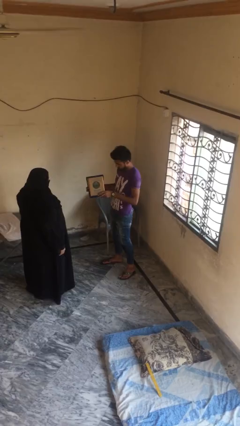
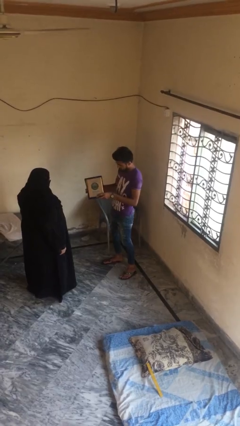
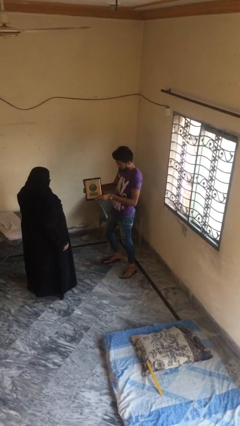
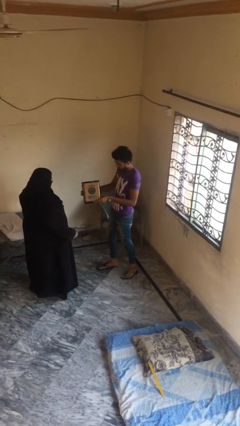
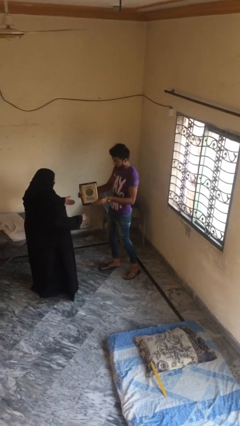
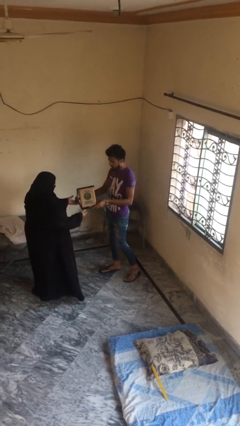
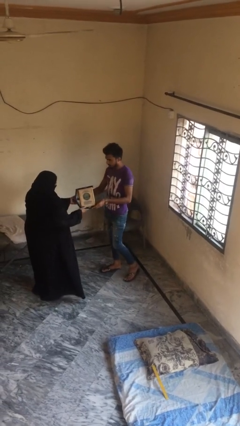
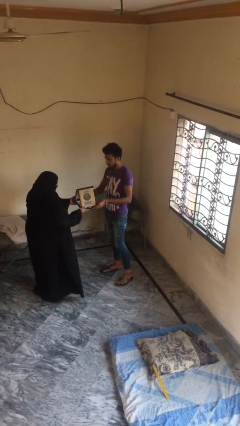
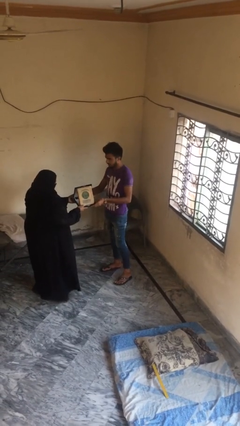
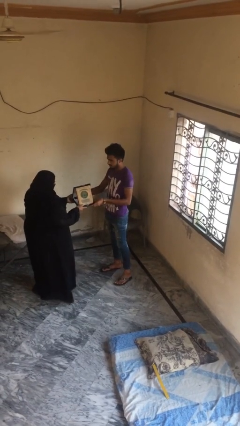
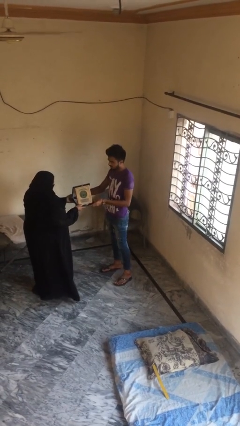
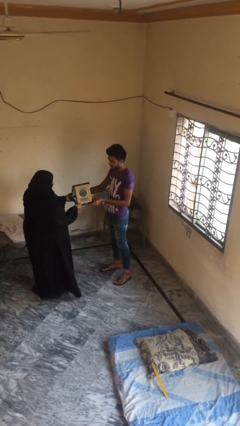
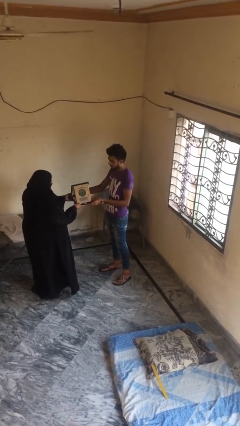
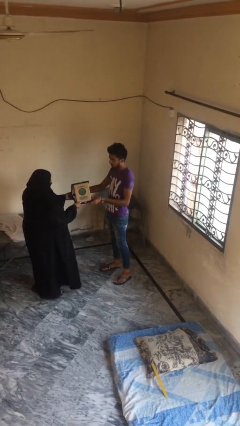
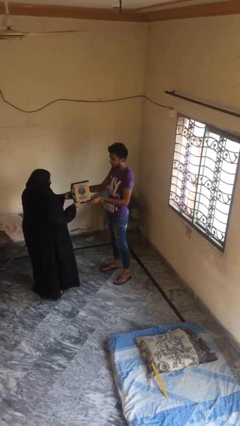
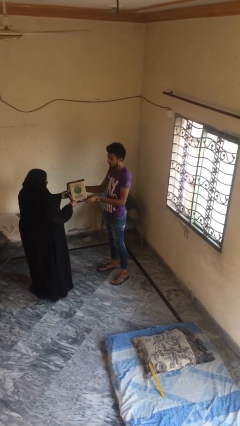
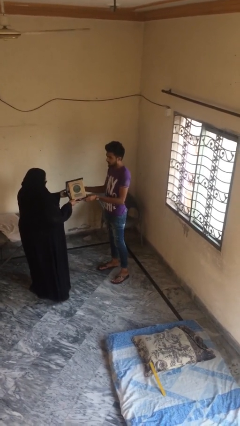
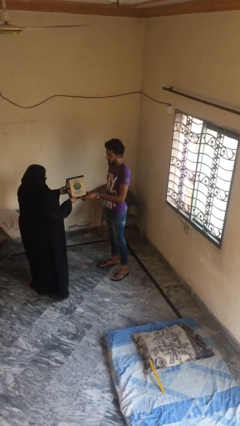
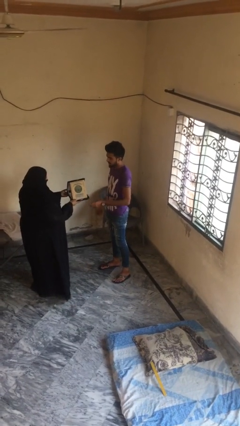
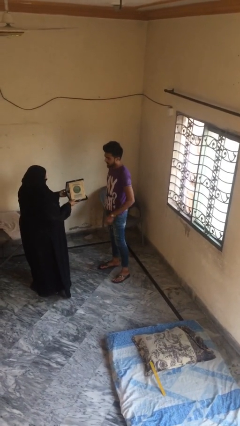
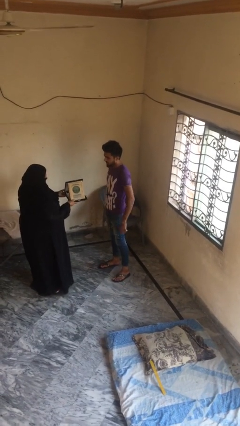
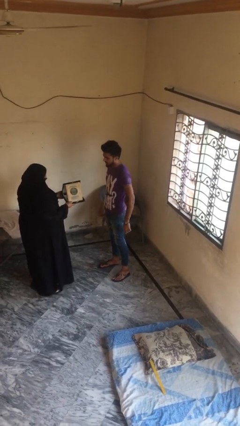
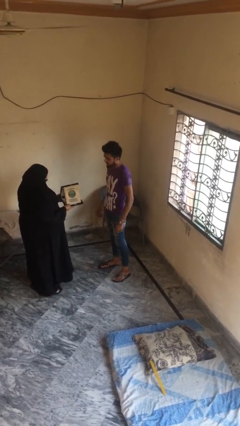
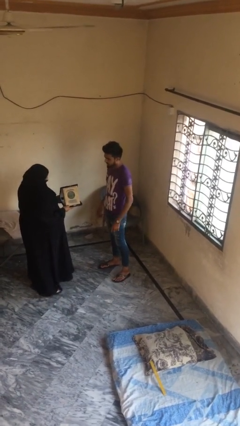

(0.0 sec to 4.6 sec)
person transfers object to person

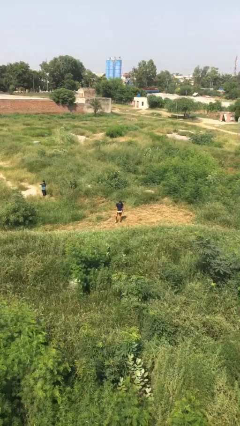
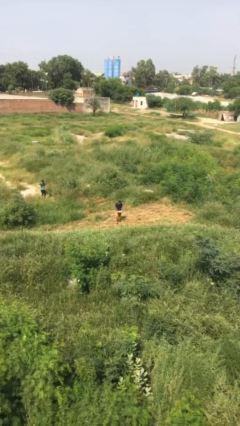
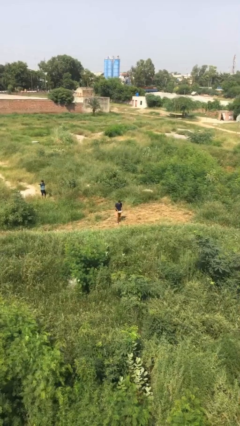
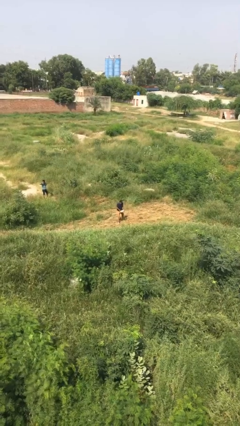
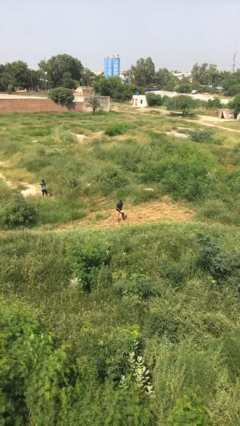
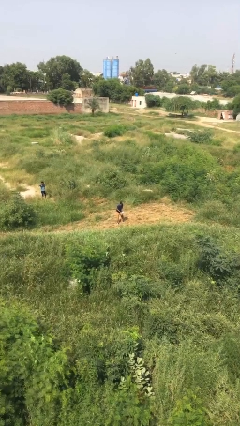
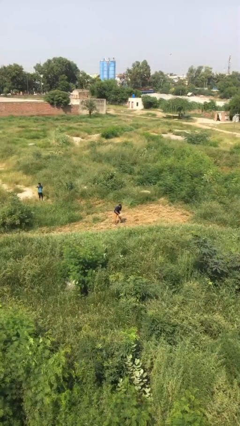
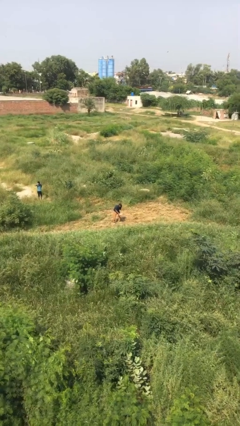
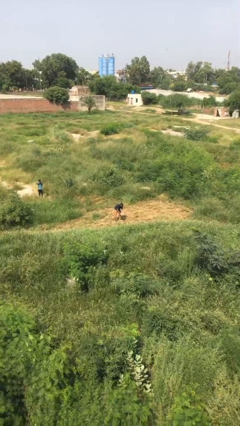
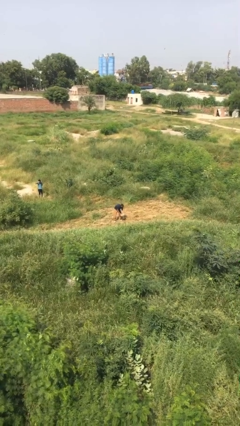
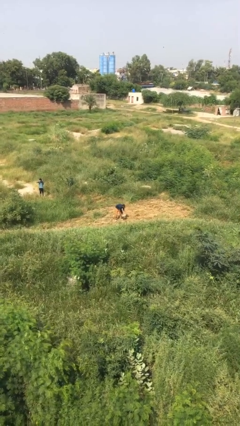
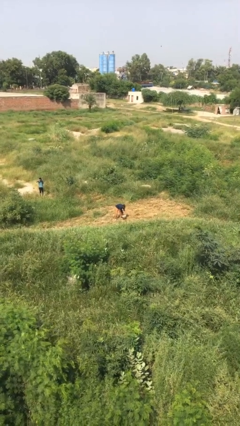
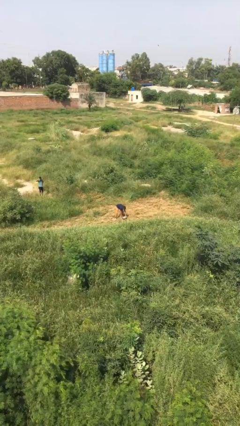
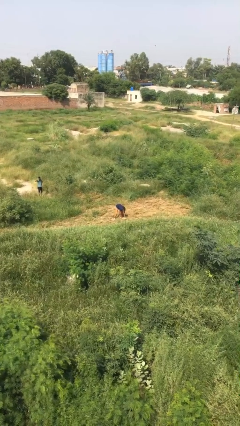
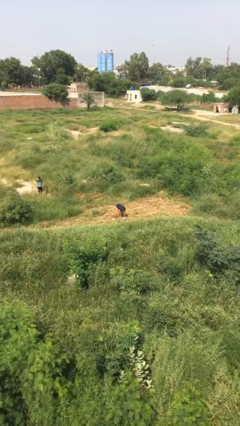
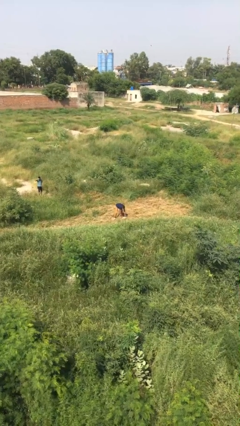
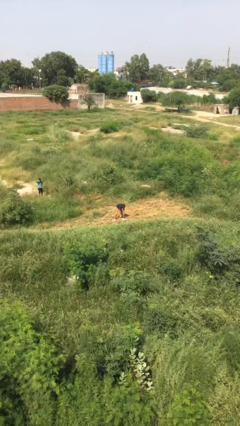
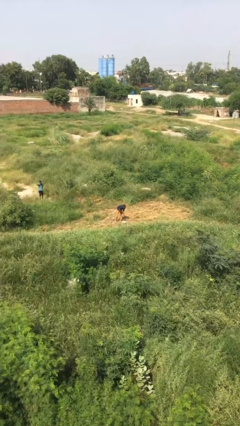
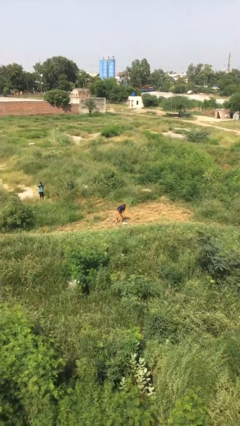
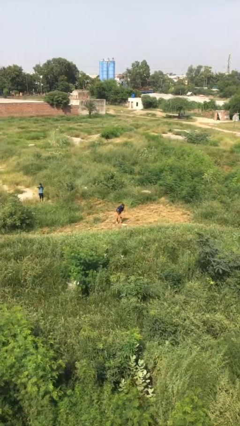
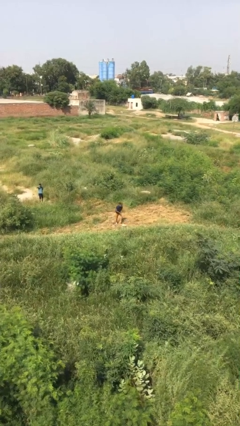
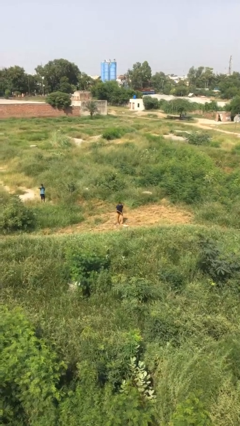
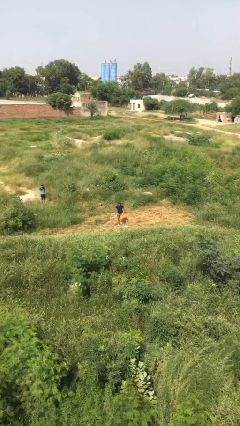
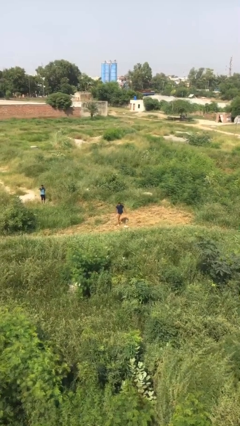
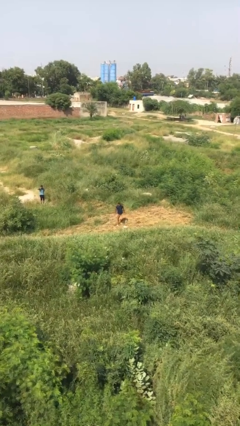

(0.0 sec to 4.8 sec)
person puts down object on floor

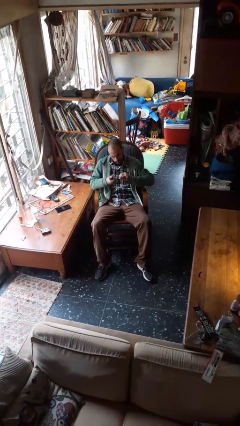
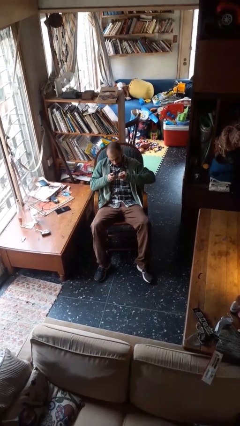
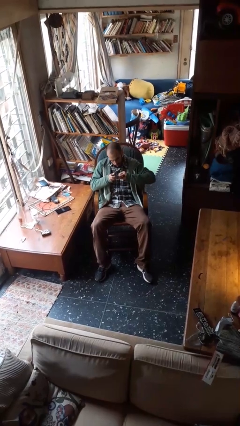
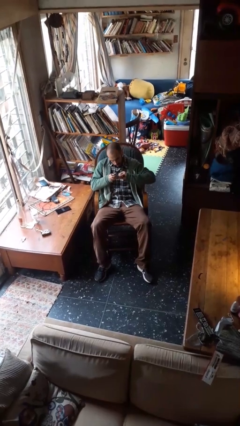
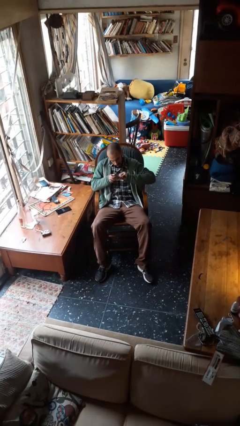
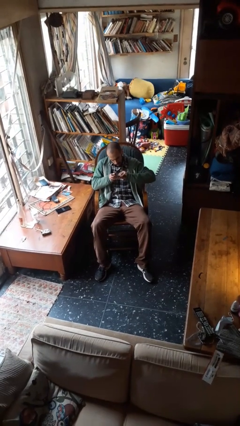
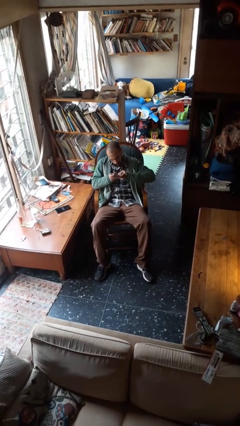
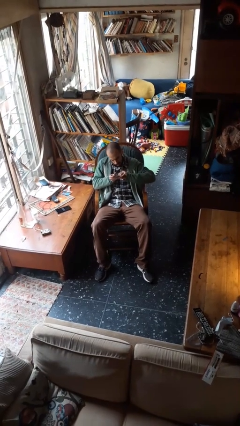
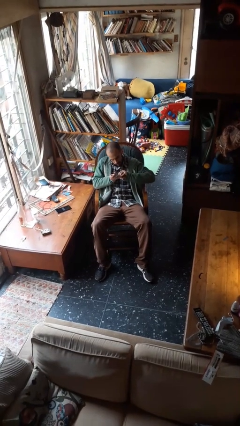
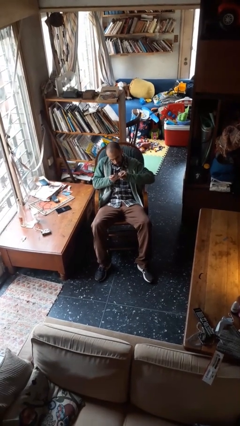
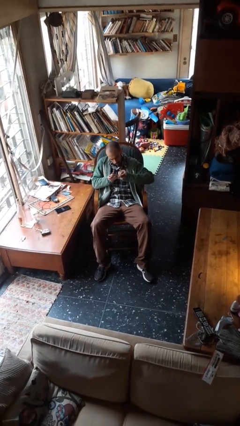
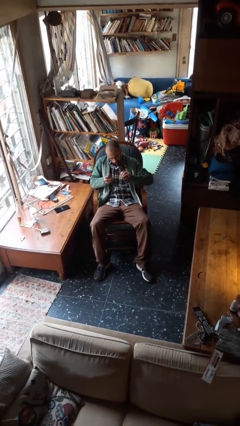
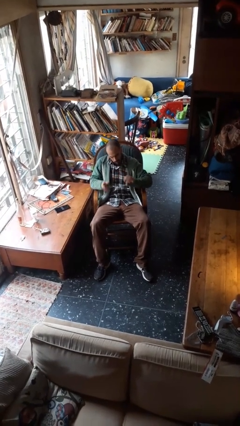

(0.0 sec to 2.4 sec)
person clips fingernails

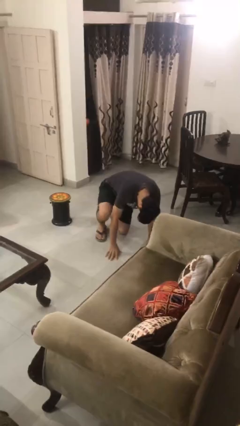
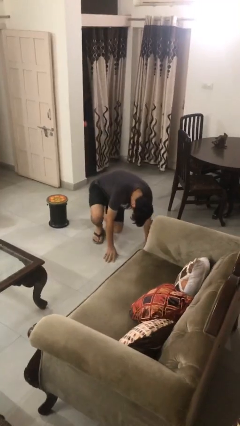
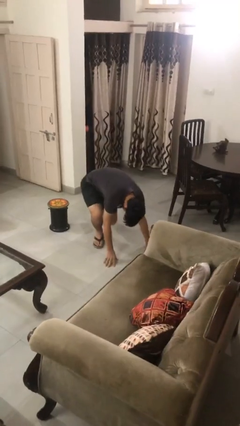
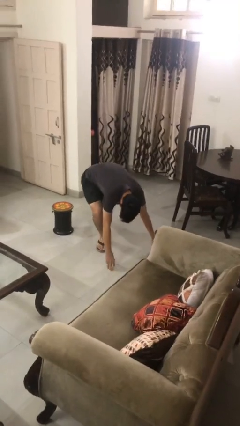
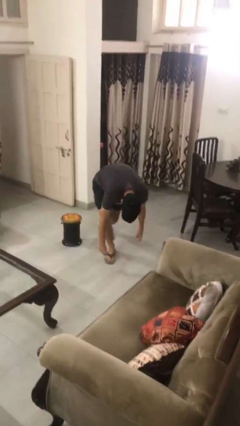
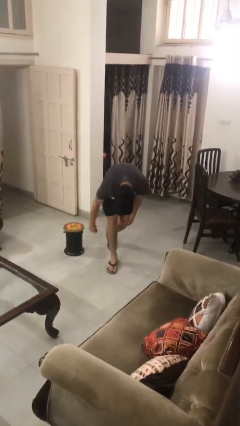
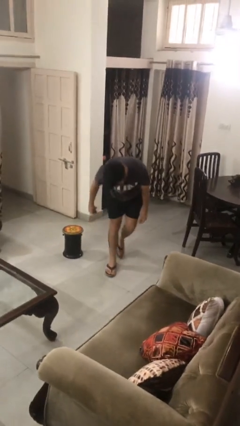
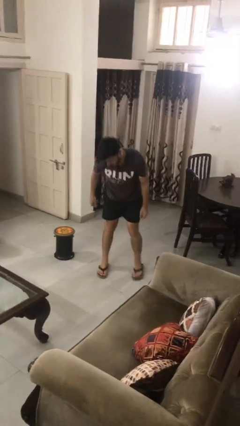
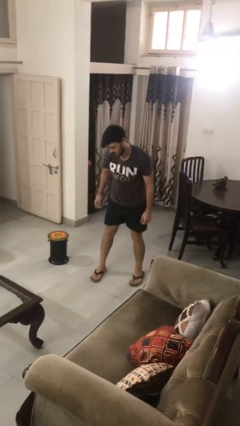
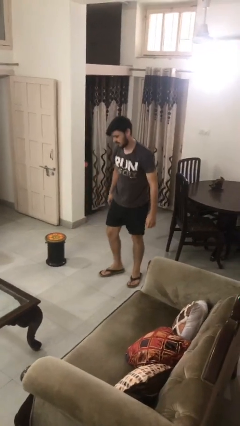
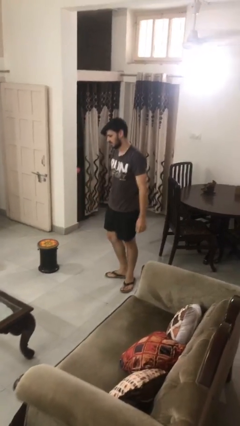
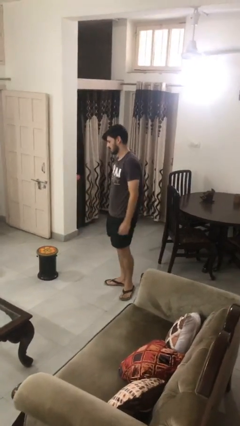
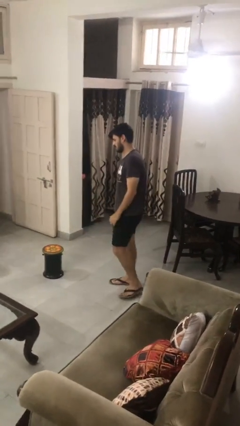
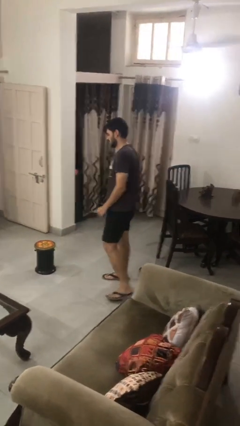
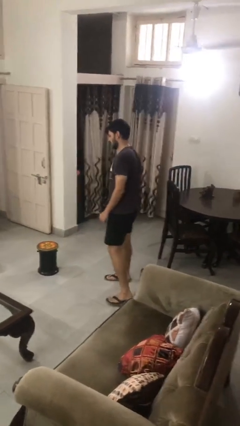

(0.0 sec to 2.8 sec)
person stands up from floor

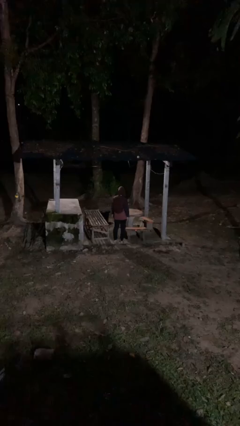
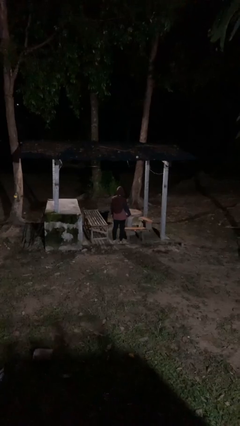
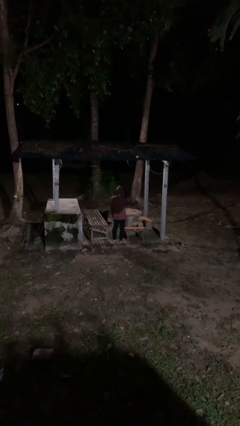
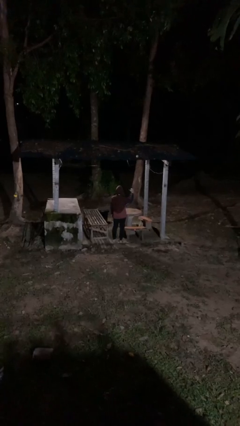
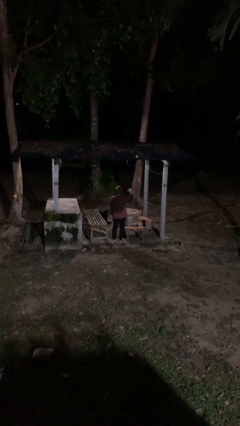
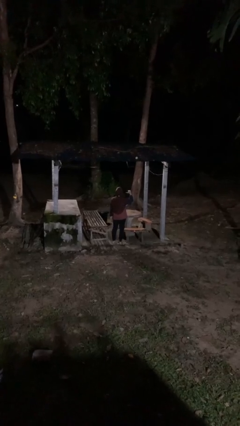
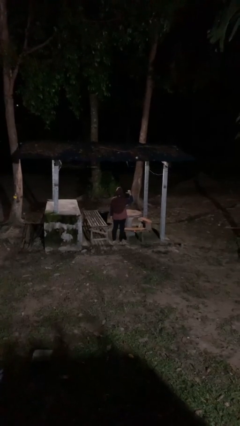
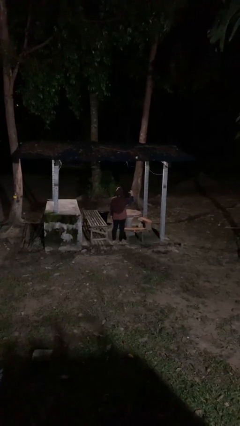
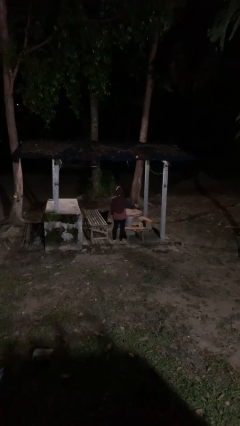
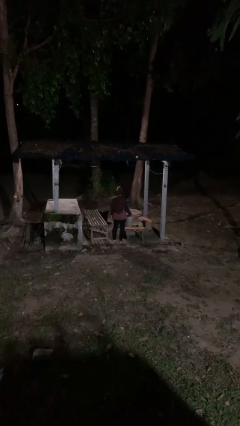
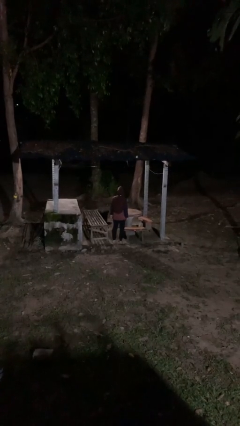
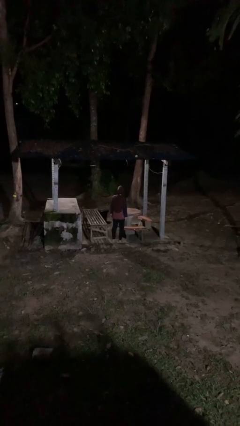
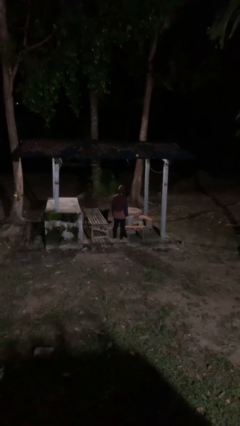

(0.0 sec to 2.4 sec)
person gestures behind me

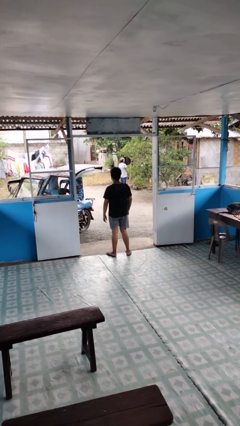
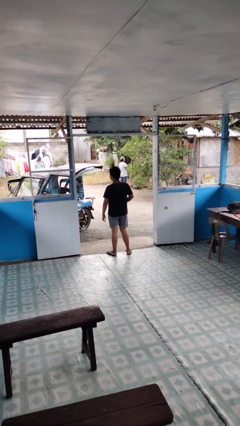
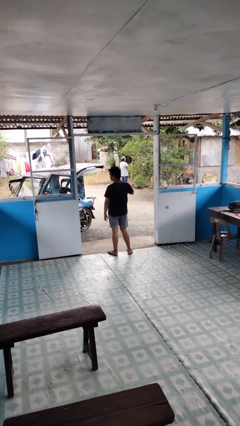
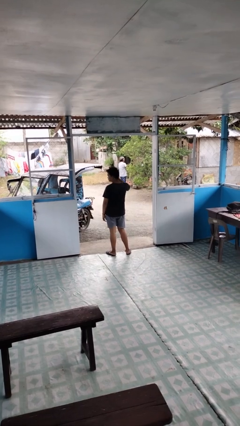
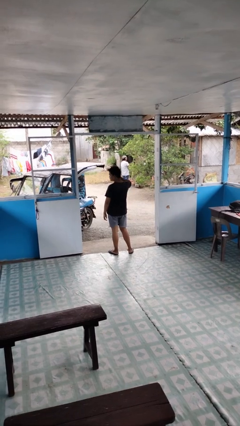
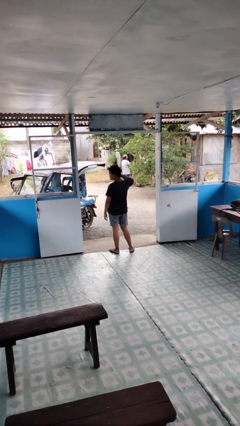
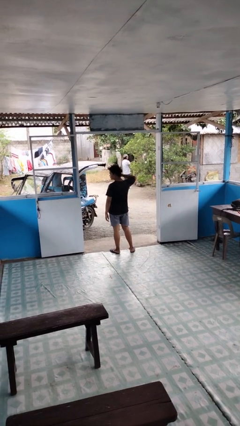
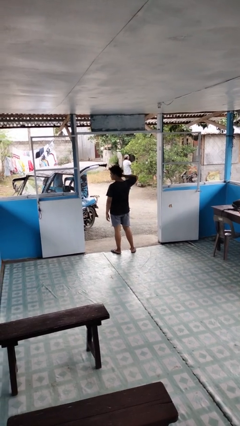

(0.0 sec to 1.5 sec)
person touches earlobe
